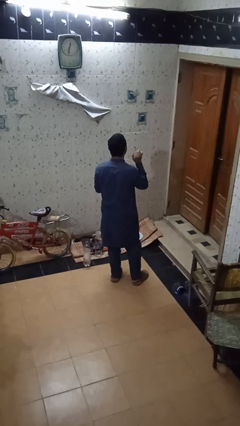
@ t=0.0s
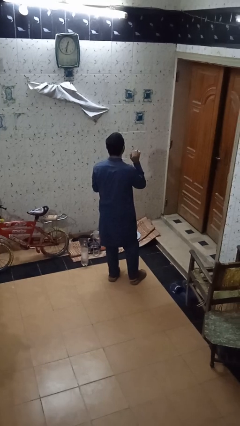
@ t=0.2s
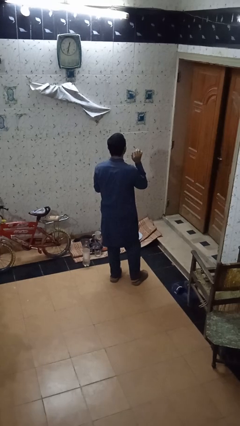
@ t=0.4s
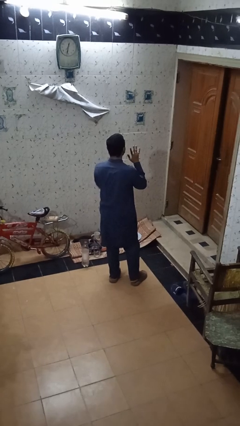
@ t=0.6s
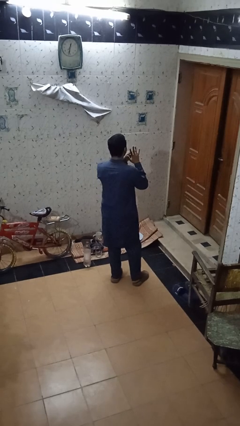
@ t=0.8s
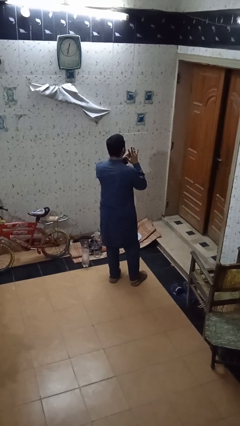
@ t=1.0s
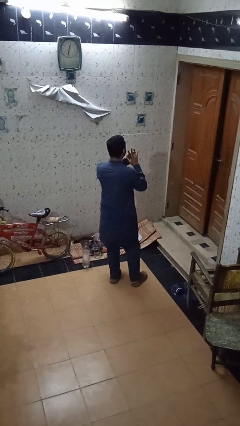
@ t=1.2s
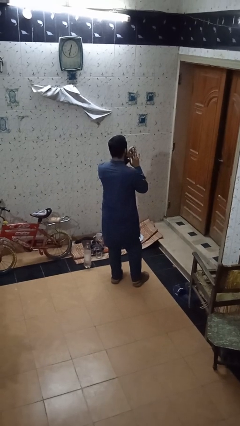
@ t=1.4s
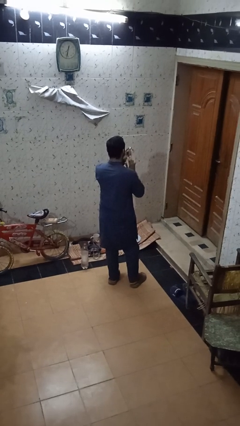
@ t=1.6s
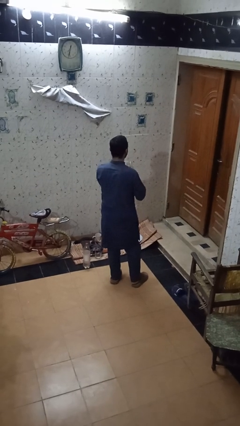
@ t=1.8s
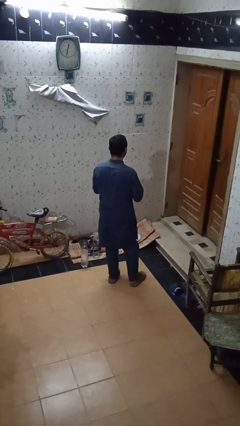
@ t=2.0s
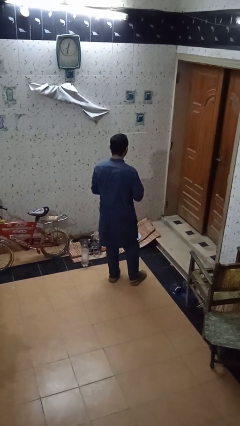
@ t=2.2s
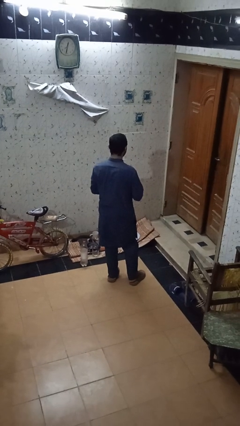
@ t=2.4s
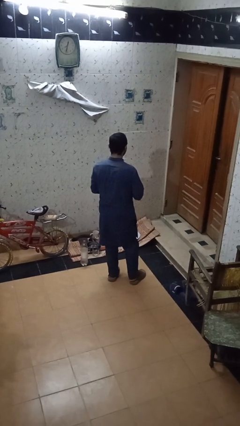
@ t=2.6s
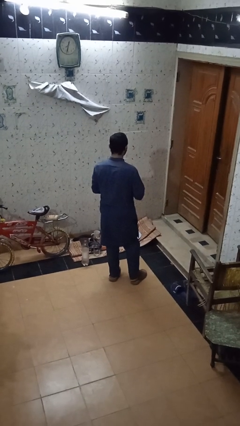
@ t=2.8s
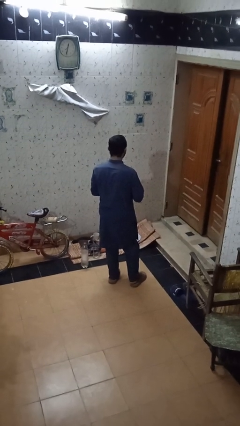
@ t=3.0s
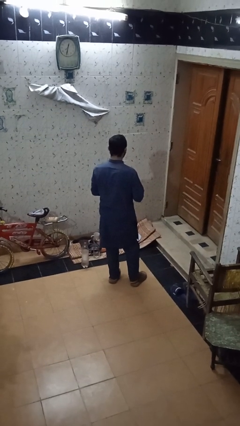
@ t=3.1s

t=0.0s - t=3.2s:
person takes off ring

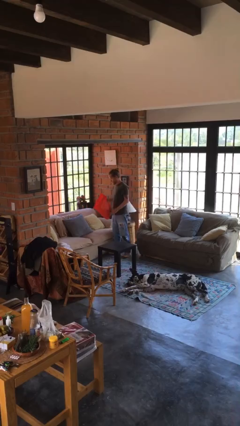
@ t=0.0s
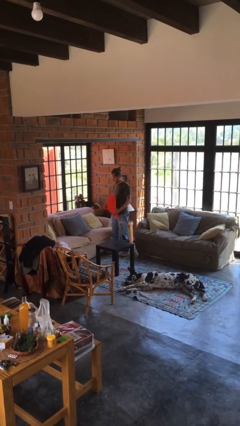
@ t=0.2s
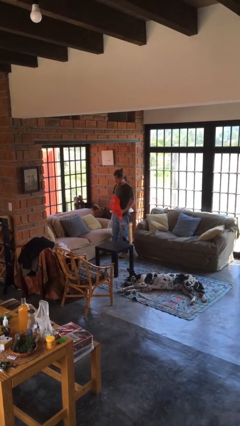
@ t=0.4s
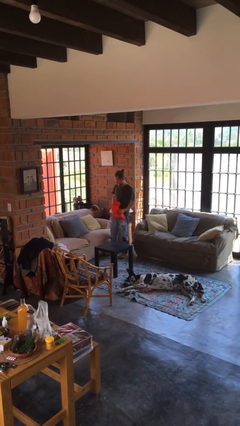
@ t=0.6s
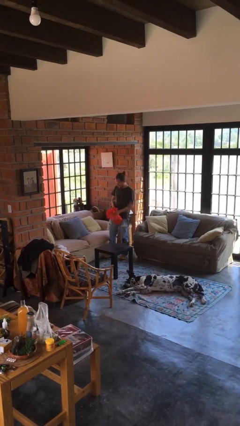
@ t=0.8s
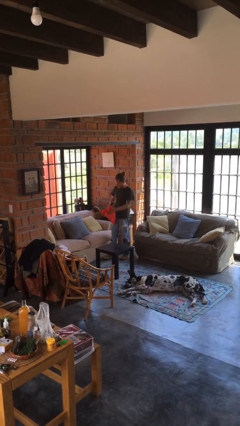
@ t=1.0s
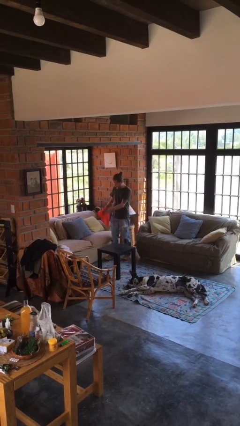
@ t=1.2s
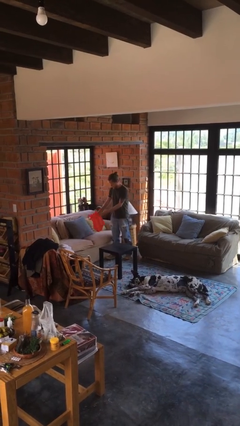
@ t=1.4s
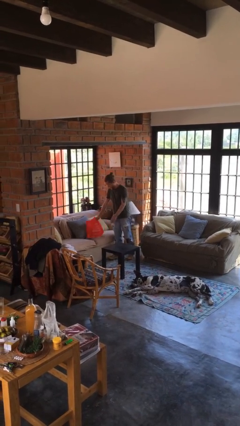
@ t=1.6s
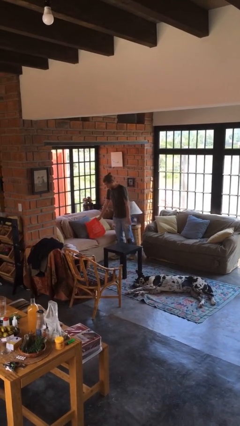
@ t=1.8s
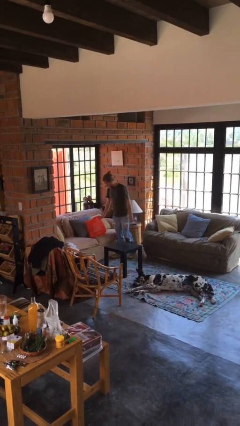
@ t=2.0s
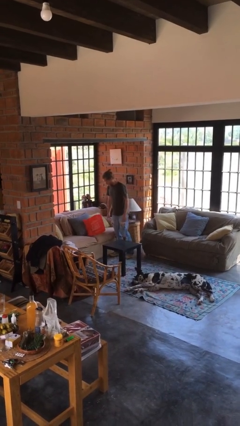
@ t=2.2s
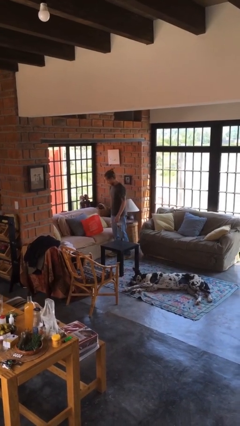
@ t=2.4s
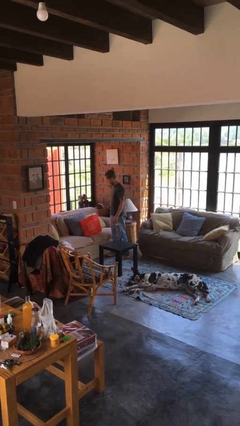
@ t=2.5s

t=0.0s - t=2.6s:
person puts down object on couch

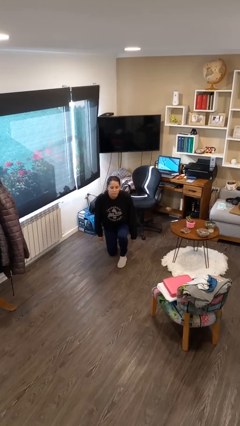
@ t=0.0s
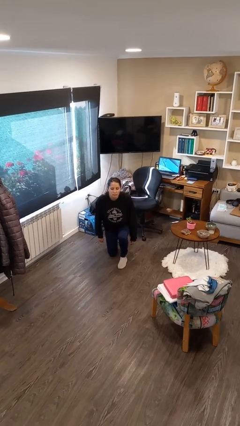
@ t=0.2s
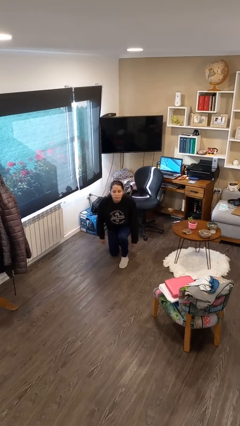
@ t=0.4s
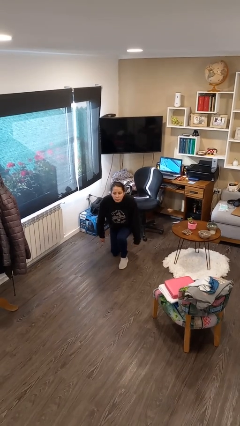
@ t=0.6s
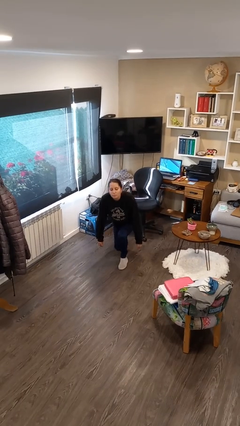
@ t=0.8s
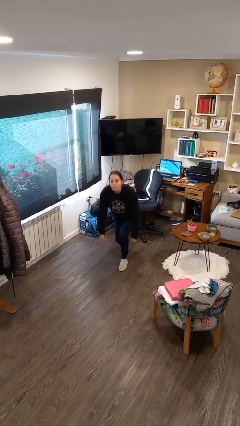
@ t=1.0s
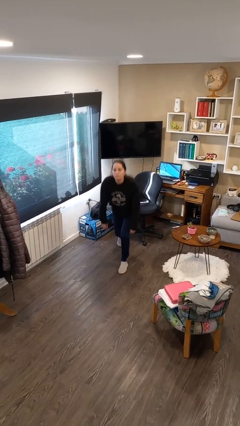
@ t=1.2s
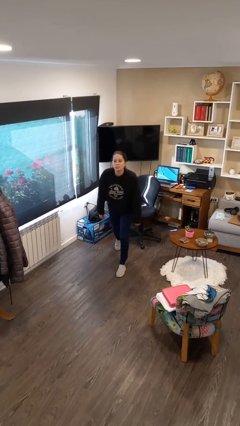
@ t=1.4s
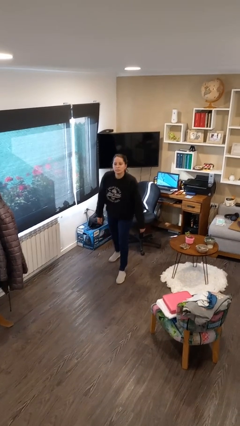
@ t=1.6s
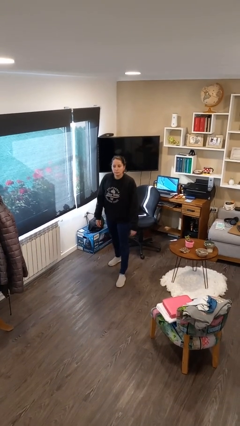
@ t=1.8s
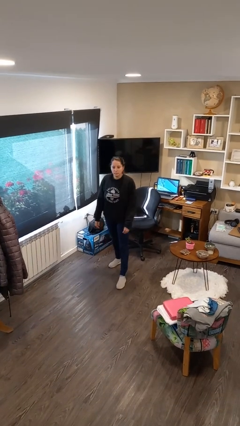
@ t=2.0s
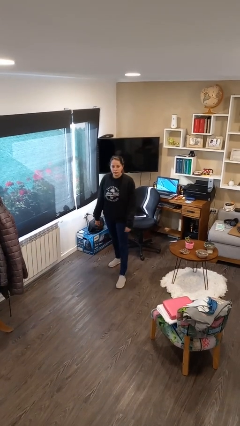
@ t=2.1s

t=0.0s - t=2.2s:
person stands up from floor

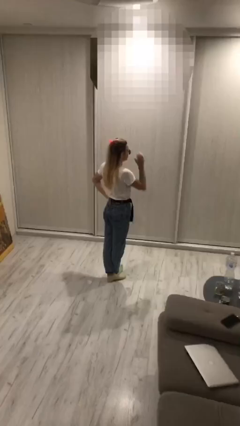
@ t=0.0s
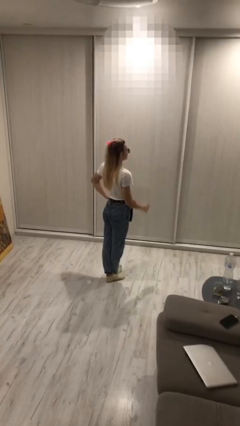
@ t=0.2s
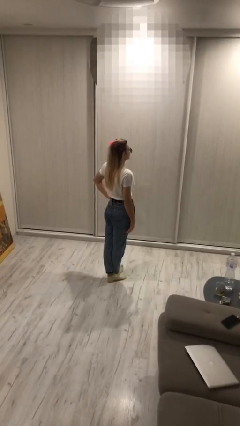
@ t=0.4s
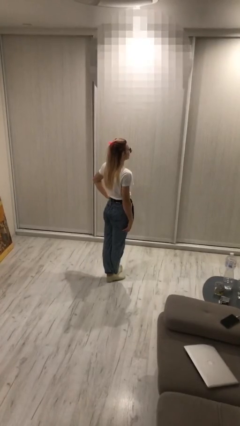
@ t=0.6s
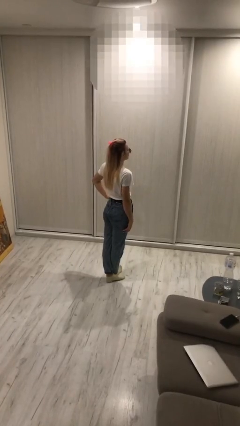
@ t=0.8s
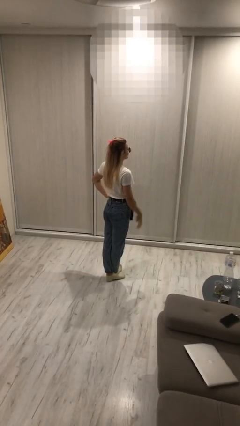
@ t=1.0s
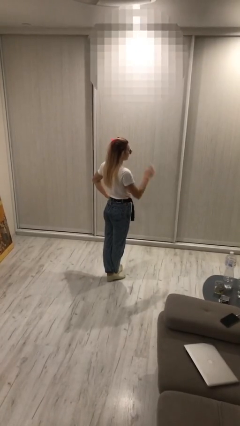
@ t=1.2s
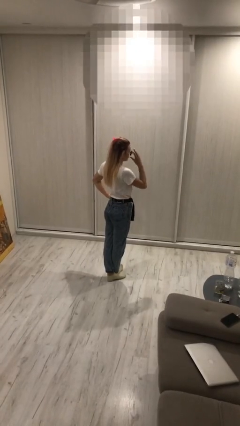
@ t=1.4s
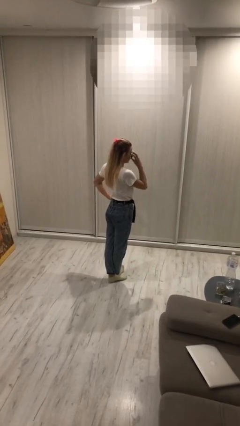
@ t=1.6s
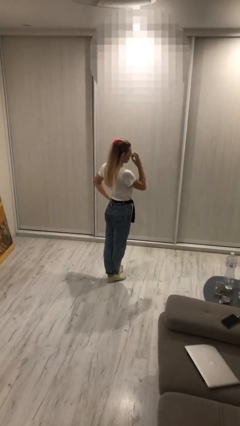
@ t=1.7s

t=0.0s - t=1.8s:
person puts on sunglasses

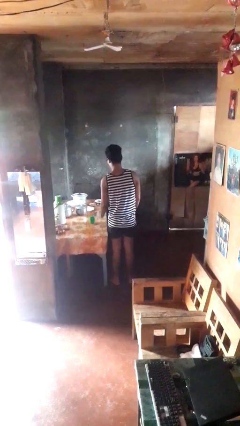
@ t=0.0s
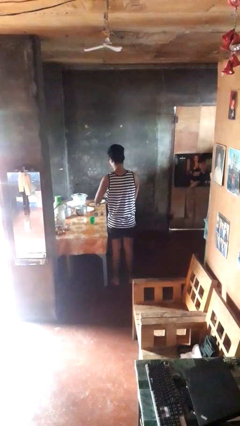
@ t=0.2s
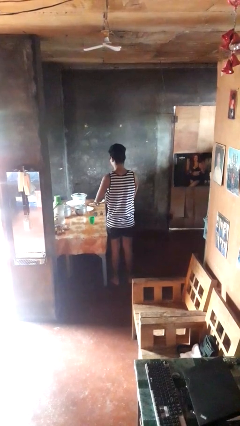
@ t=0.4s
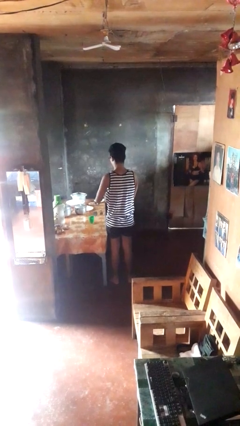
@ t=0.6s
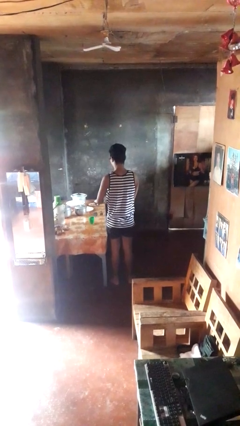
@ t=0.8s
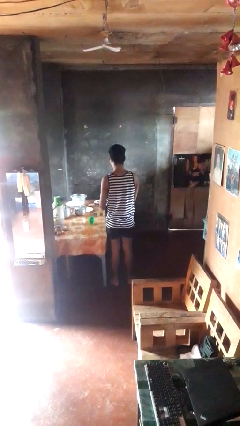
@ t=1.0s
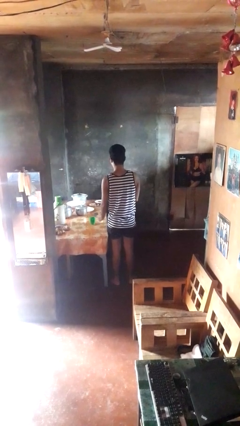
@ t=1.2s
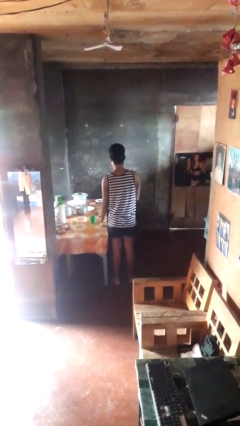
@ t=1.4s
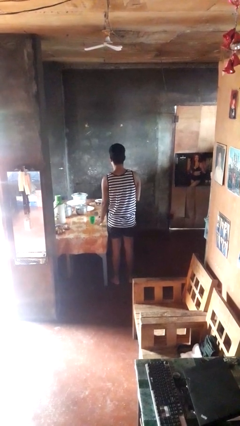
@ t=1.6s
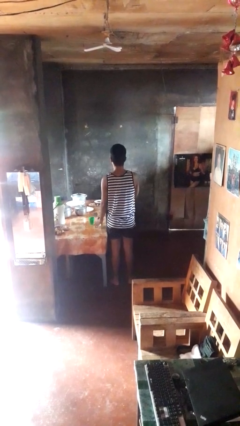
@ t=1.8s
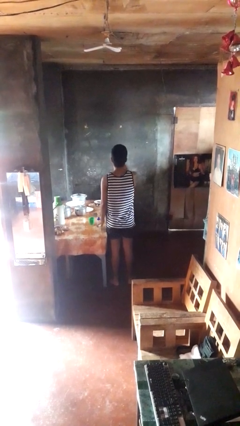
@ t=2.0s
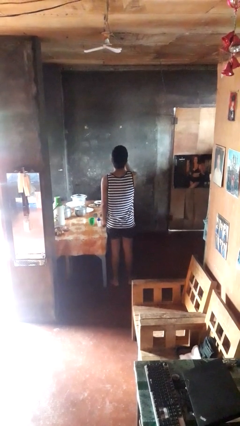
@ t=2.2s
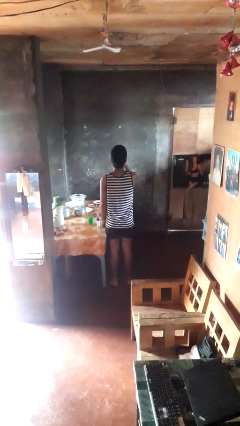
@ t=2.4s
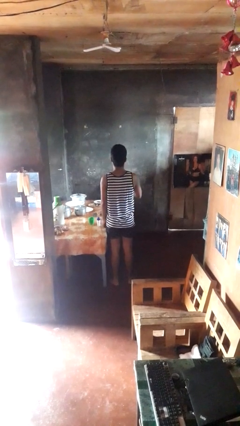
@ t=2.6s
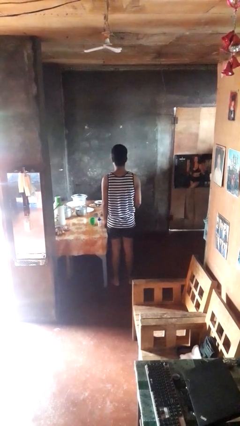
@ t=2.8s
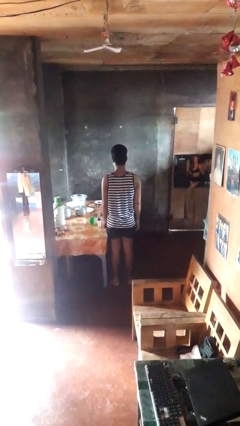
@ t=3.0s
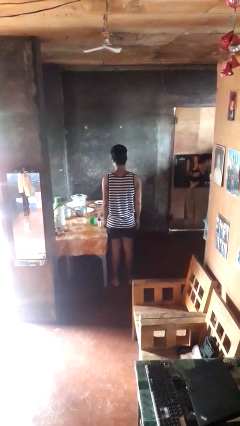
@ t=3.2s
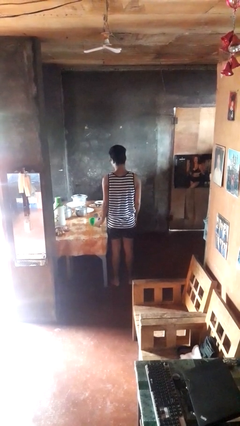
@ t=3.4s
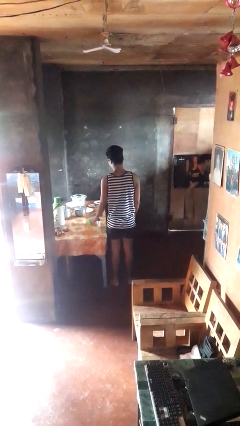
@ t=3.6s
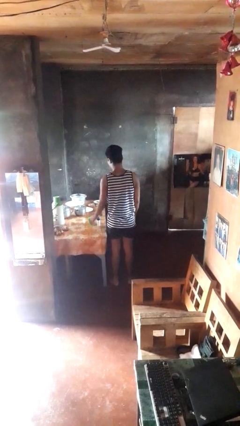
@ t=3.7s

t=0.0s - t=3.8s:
person takes medicine pills

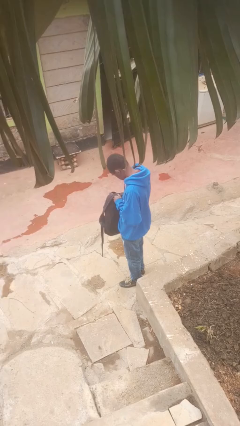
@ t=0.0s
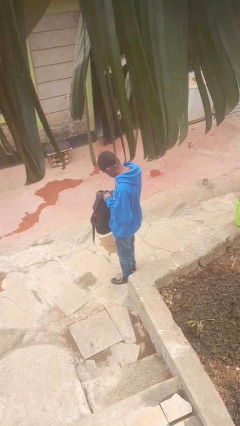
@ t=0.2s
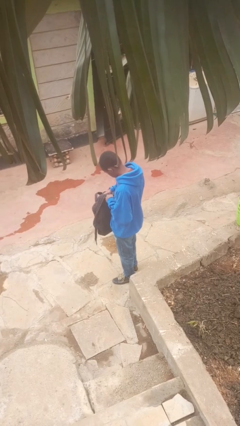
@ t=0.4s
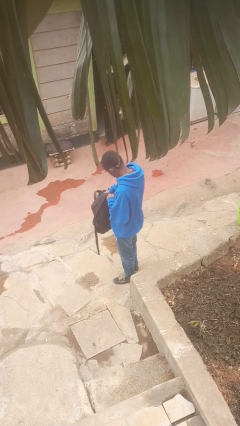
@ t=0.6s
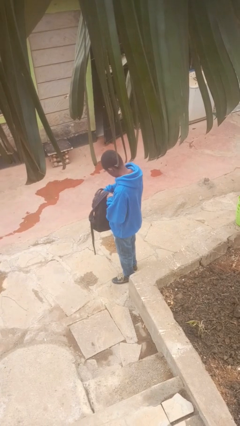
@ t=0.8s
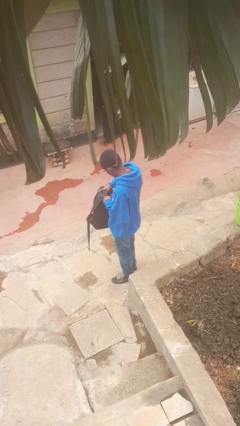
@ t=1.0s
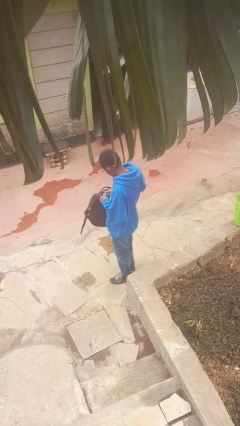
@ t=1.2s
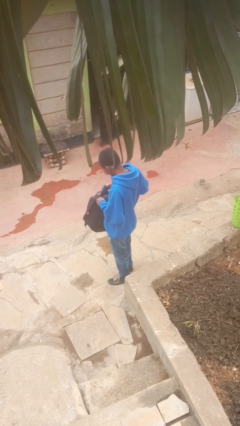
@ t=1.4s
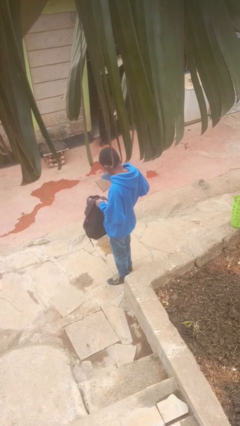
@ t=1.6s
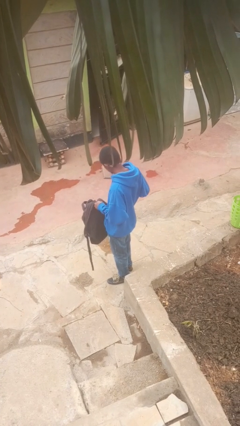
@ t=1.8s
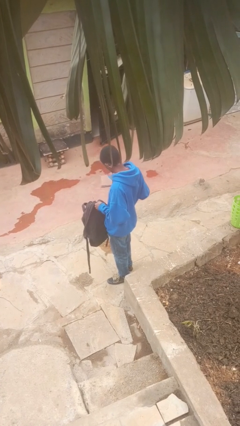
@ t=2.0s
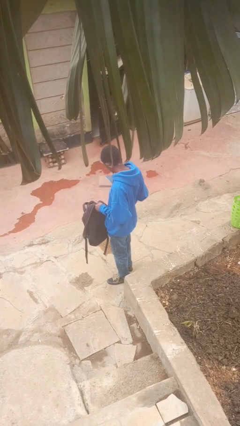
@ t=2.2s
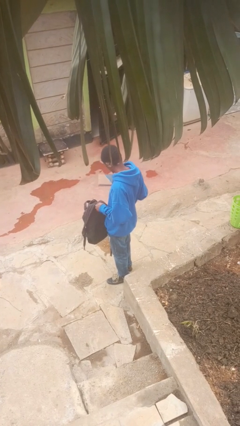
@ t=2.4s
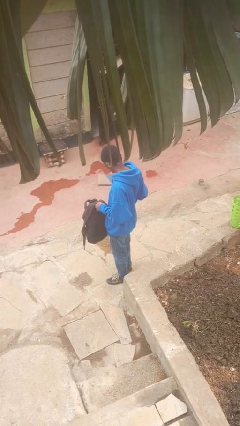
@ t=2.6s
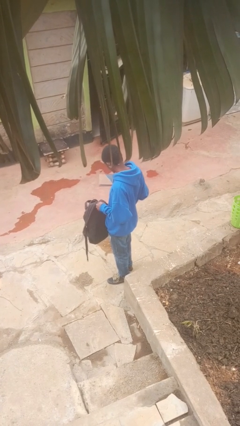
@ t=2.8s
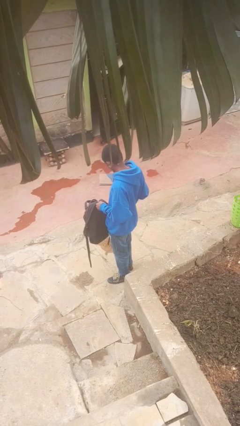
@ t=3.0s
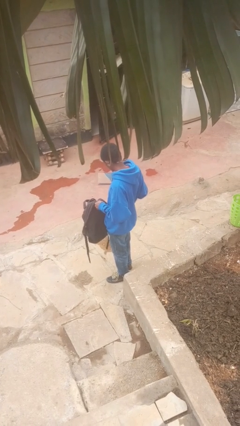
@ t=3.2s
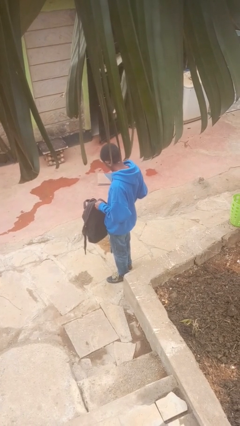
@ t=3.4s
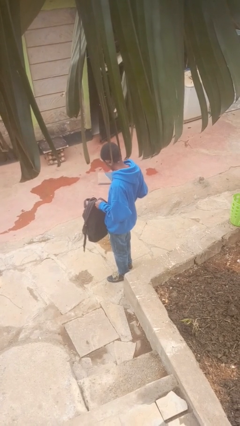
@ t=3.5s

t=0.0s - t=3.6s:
person takes object from backpack
